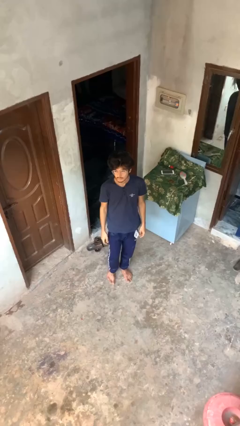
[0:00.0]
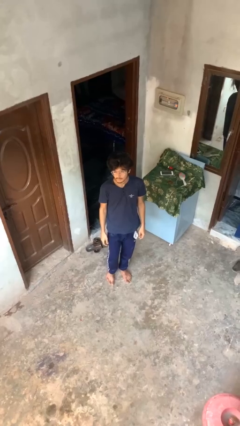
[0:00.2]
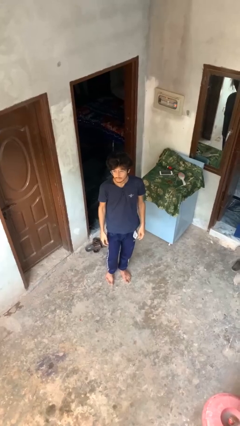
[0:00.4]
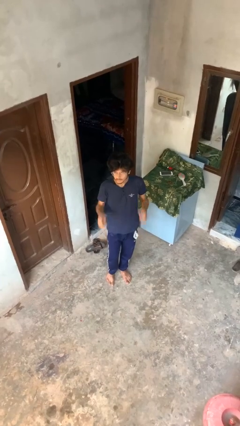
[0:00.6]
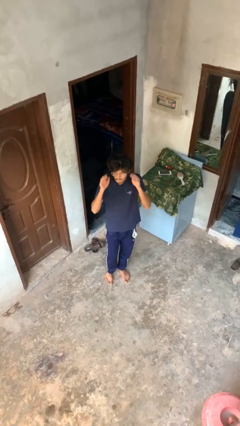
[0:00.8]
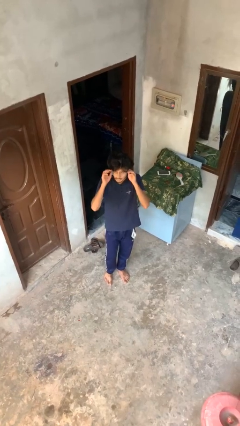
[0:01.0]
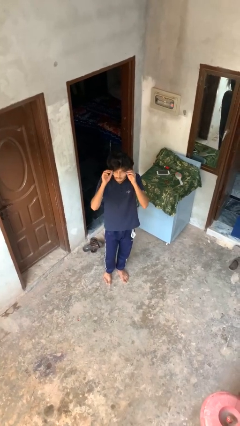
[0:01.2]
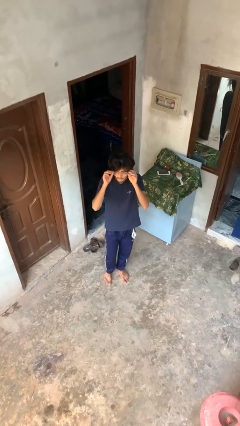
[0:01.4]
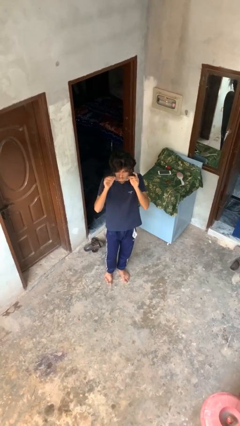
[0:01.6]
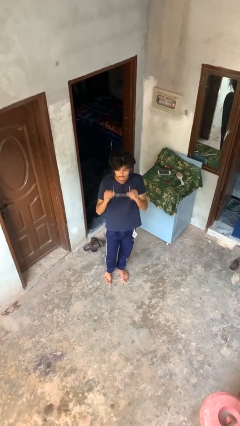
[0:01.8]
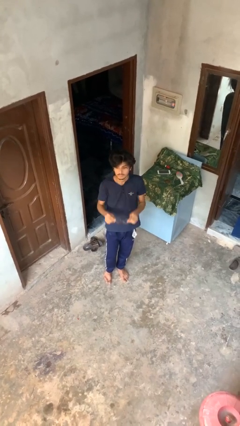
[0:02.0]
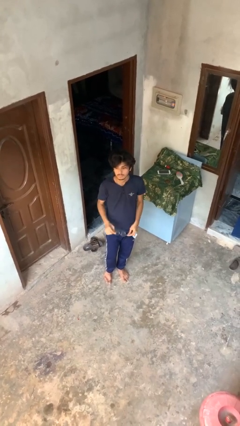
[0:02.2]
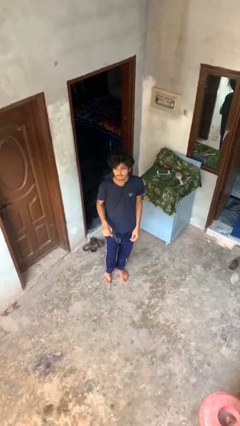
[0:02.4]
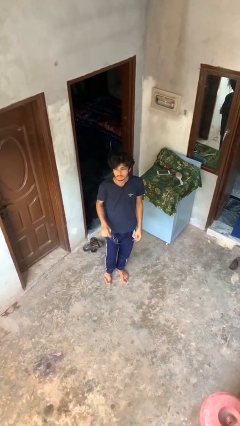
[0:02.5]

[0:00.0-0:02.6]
person takes off glasses

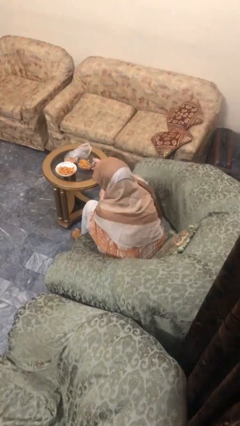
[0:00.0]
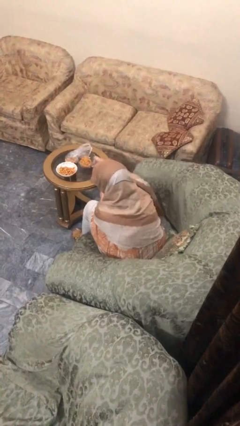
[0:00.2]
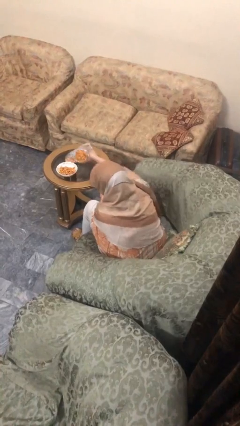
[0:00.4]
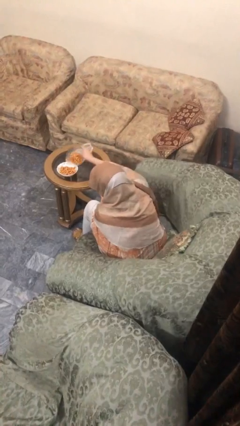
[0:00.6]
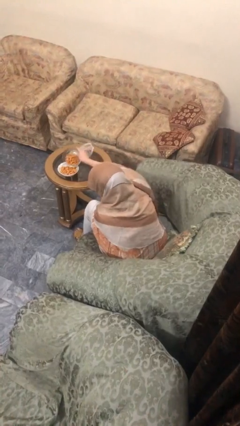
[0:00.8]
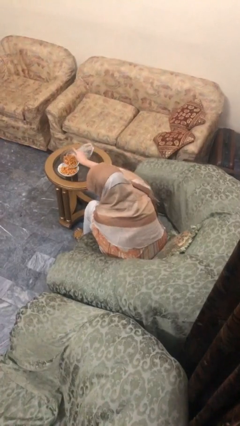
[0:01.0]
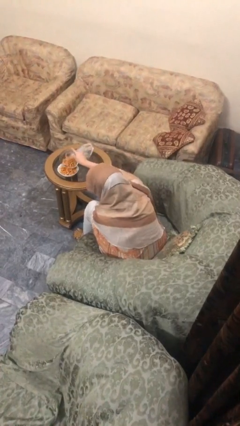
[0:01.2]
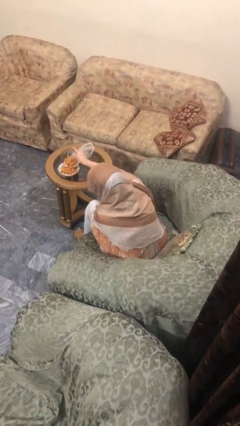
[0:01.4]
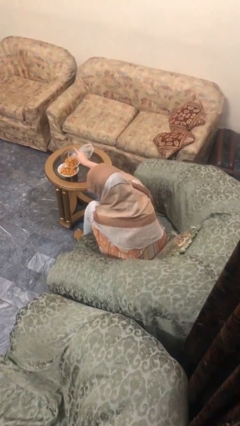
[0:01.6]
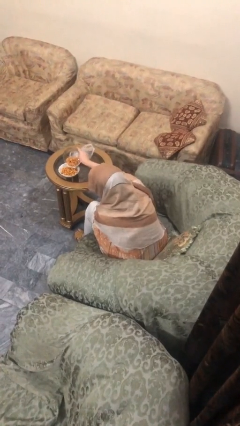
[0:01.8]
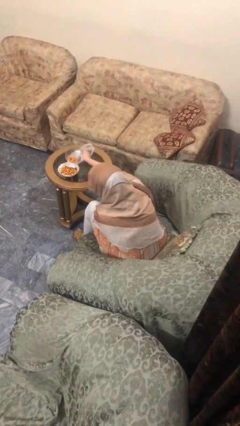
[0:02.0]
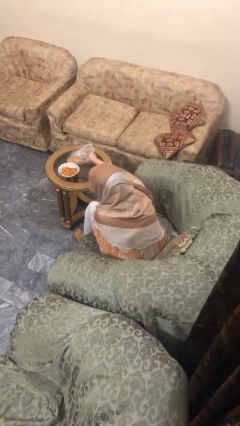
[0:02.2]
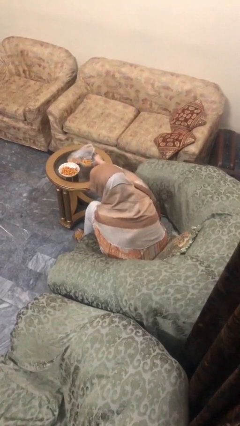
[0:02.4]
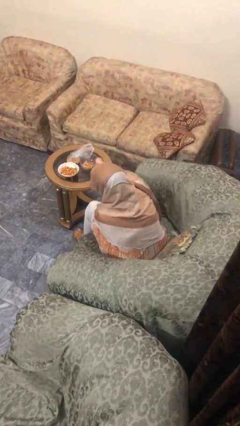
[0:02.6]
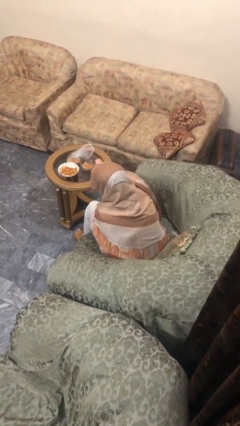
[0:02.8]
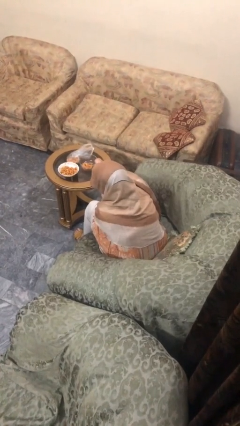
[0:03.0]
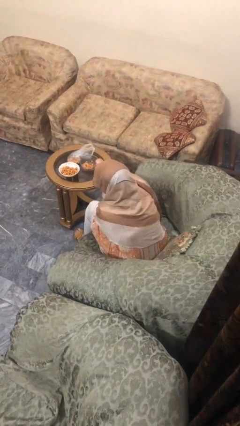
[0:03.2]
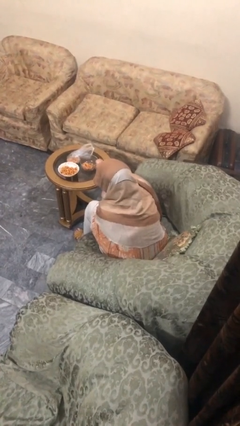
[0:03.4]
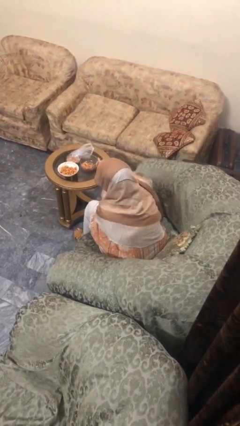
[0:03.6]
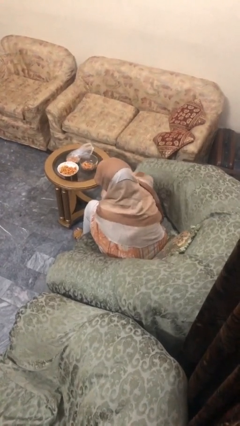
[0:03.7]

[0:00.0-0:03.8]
person pours into bowl

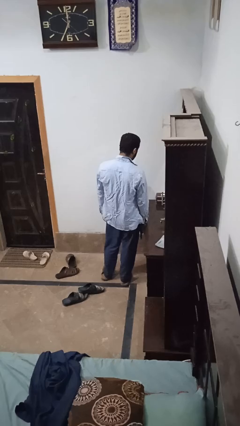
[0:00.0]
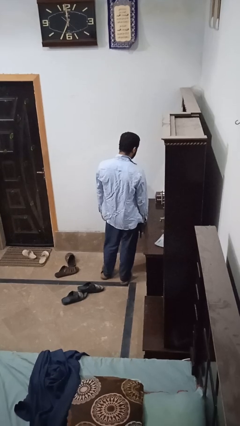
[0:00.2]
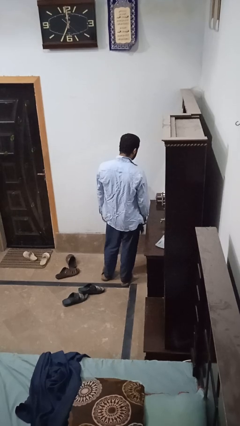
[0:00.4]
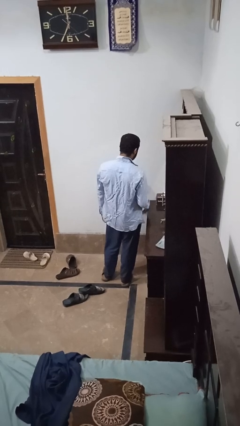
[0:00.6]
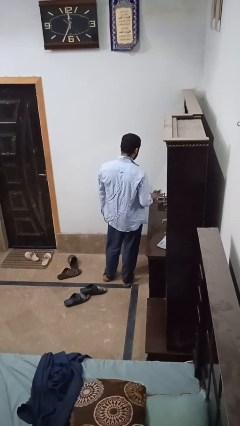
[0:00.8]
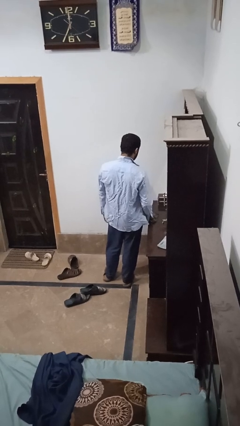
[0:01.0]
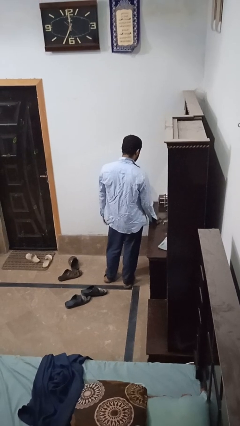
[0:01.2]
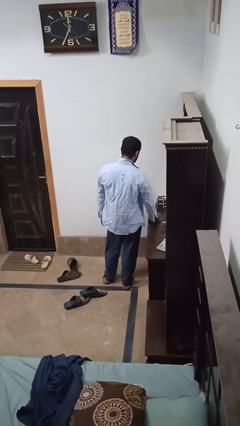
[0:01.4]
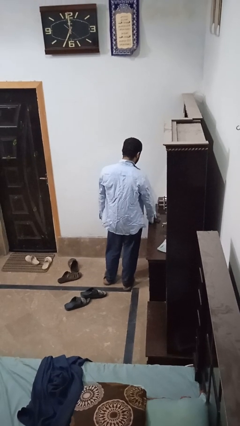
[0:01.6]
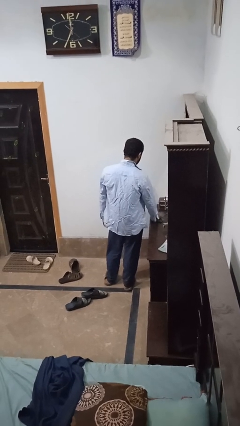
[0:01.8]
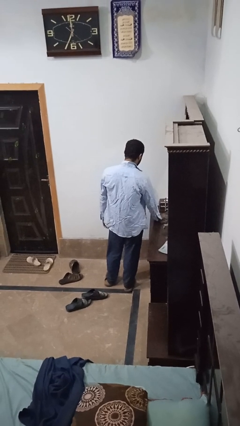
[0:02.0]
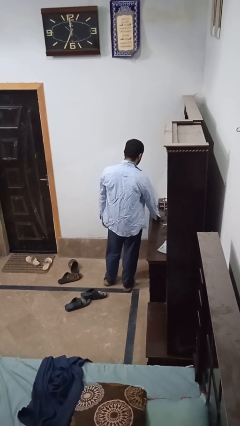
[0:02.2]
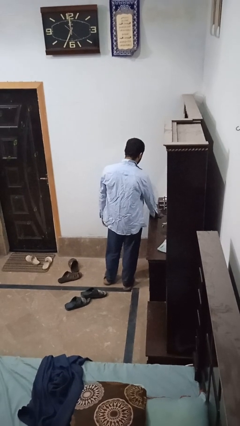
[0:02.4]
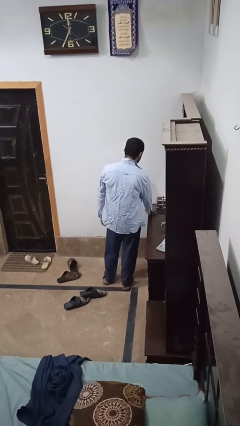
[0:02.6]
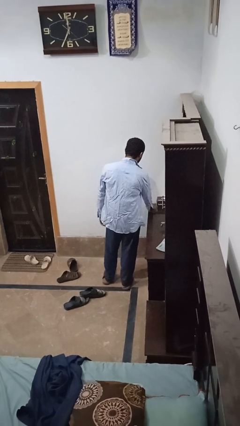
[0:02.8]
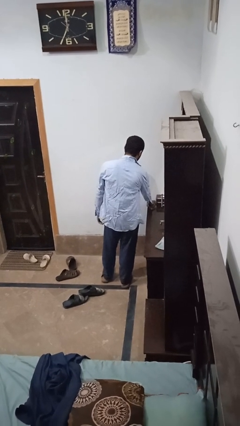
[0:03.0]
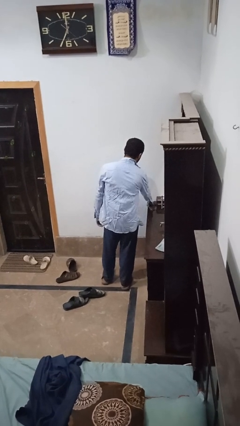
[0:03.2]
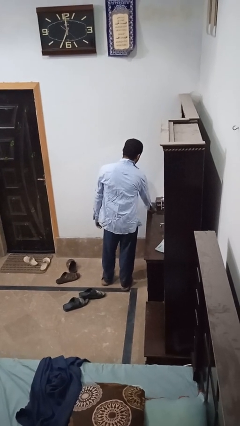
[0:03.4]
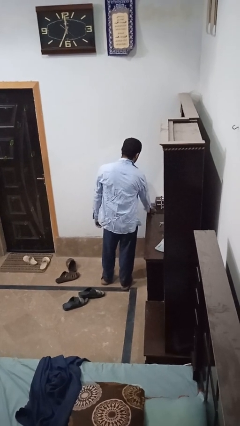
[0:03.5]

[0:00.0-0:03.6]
person cleans table with rag

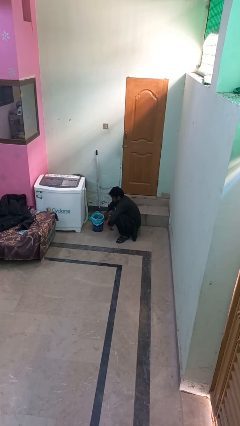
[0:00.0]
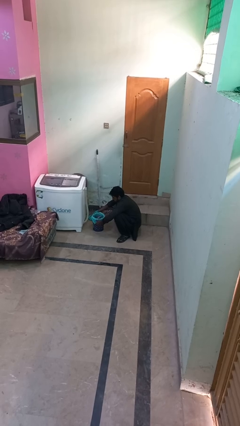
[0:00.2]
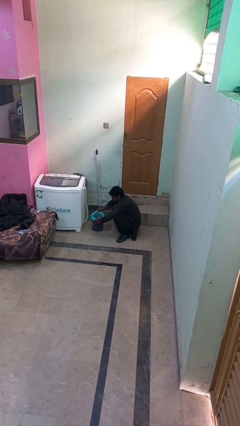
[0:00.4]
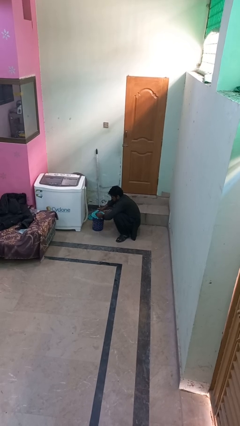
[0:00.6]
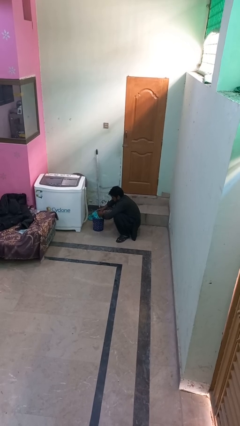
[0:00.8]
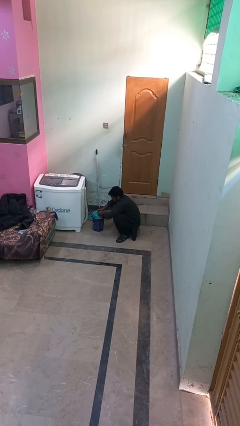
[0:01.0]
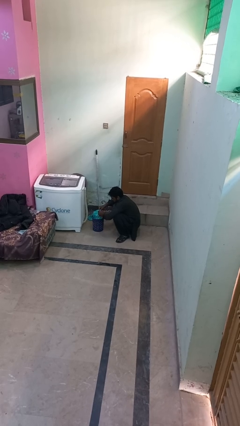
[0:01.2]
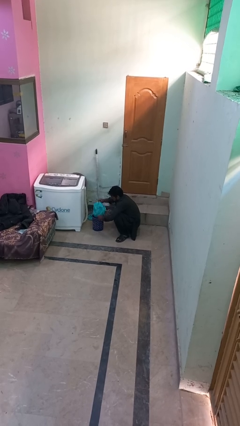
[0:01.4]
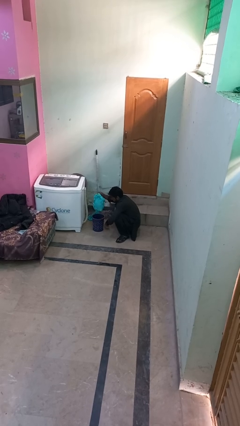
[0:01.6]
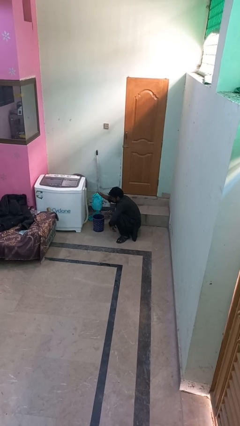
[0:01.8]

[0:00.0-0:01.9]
person removes trashbag from trashcan

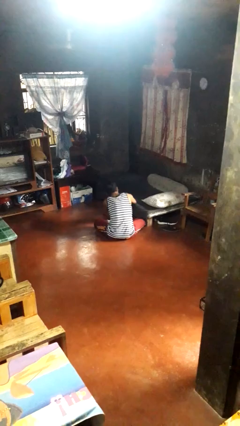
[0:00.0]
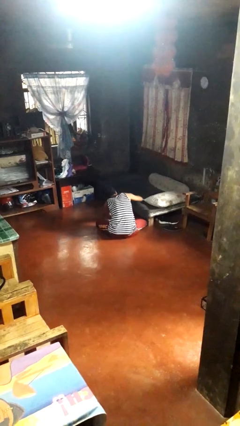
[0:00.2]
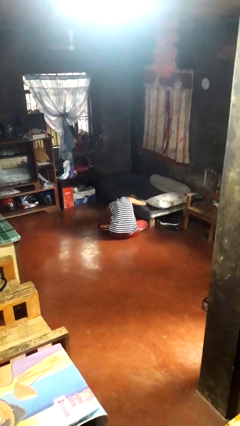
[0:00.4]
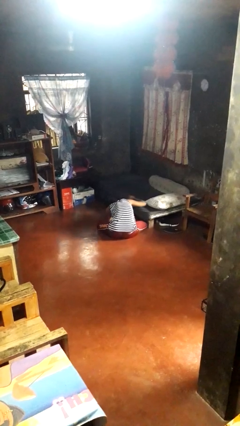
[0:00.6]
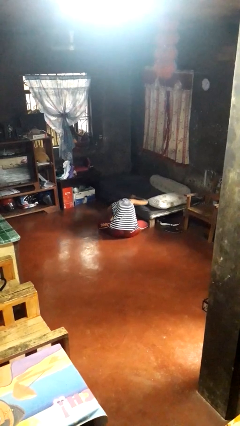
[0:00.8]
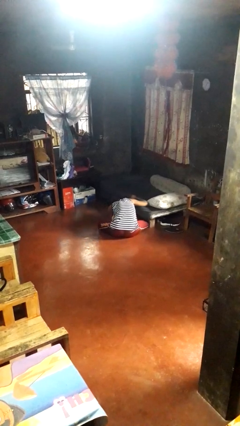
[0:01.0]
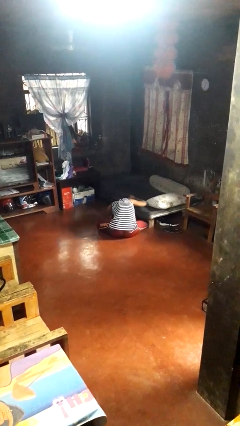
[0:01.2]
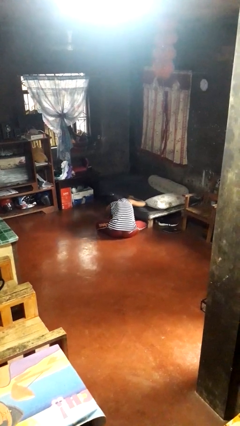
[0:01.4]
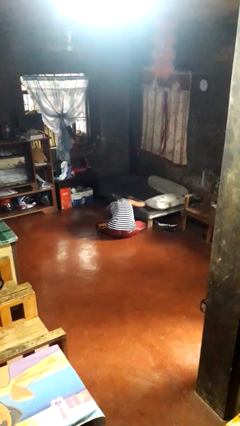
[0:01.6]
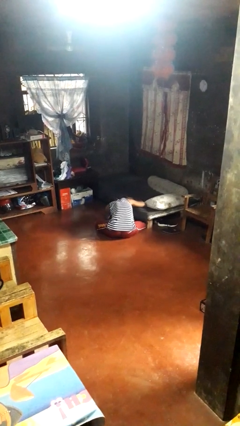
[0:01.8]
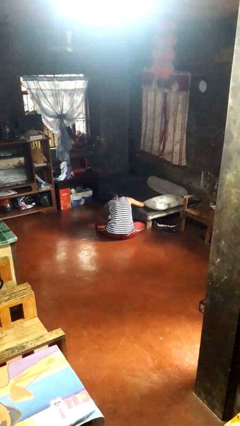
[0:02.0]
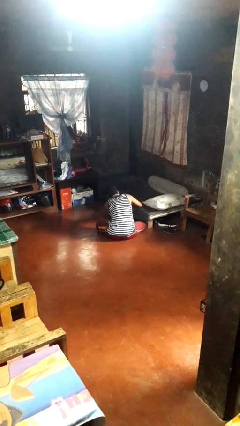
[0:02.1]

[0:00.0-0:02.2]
person searches under bed

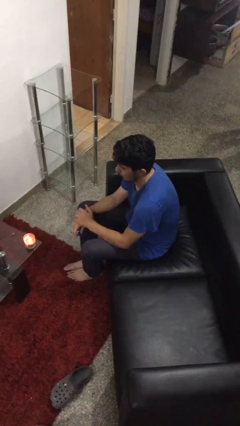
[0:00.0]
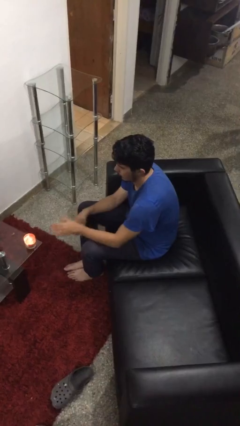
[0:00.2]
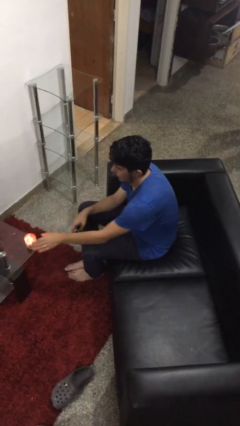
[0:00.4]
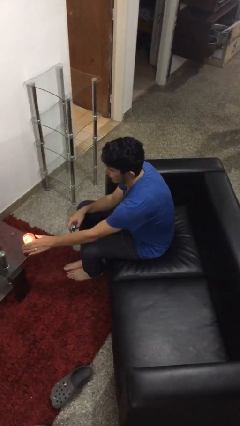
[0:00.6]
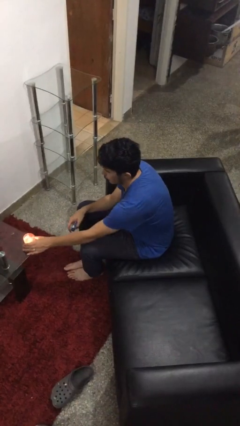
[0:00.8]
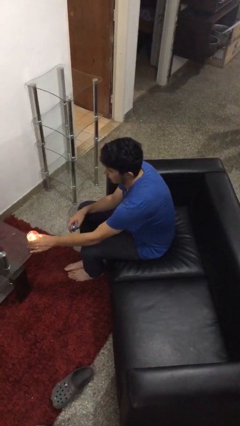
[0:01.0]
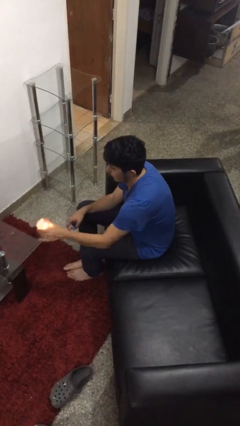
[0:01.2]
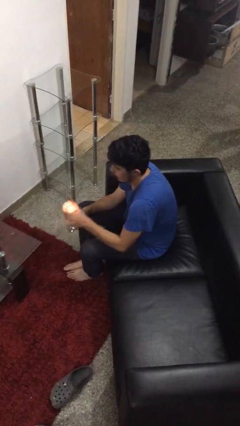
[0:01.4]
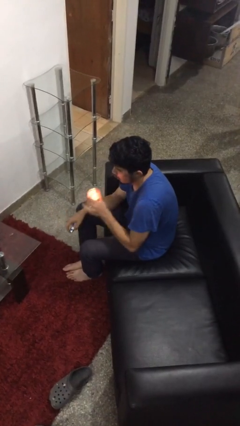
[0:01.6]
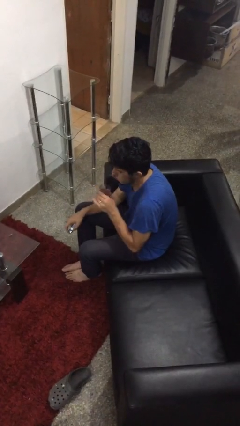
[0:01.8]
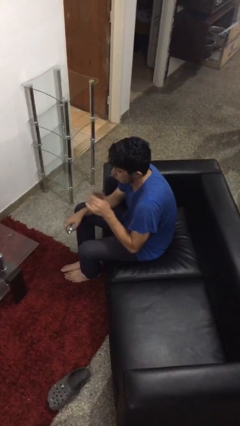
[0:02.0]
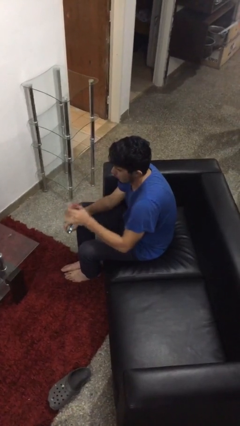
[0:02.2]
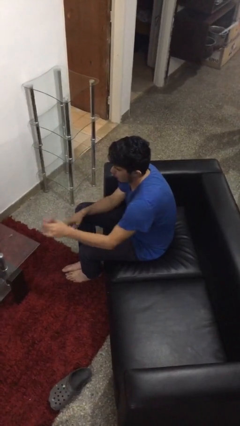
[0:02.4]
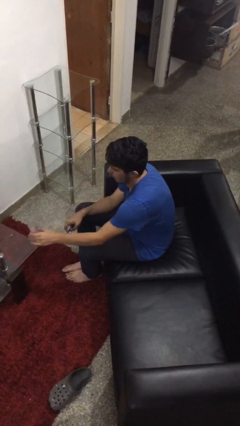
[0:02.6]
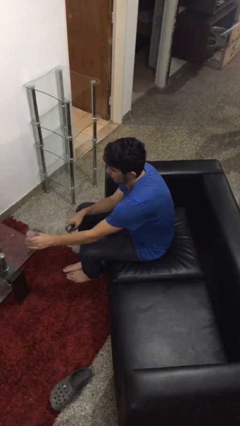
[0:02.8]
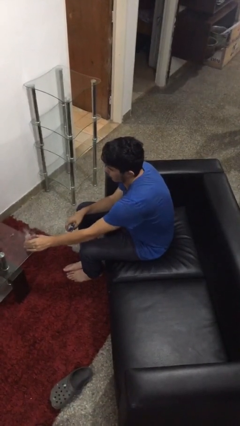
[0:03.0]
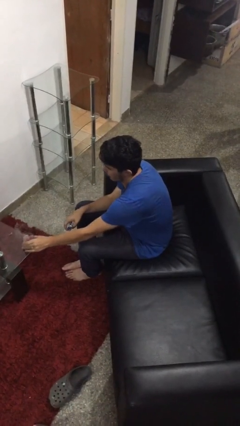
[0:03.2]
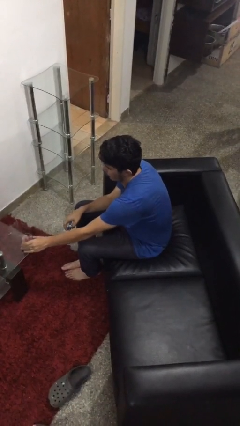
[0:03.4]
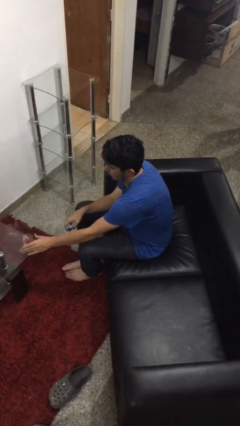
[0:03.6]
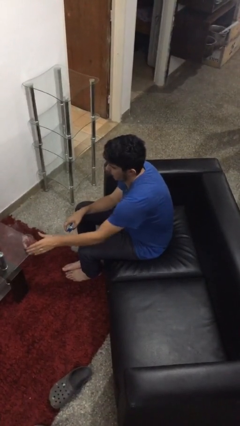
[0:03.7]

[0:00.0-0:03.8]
person extinguishes candle
